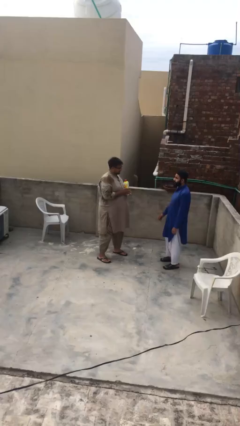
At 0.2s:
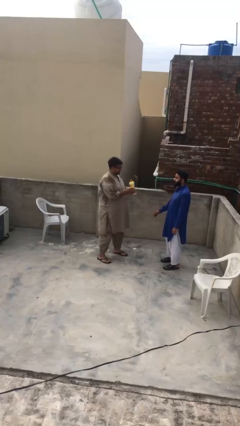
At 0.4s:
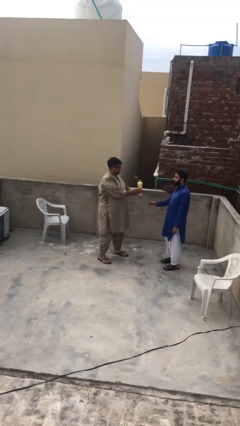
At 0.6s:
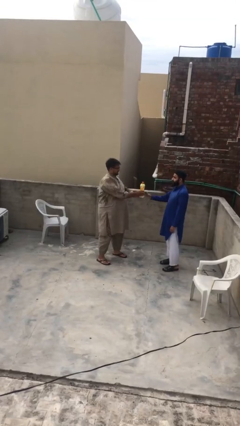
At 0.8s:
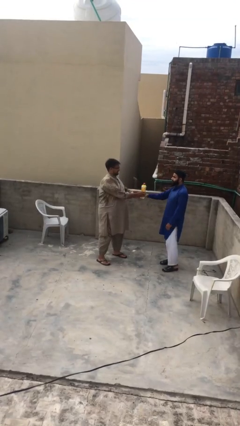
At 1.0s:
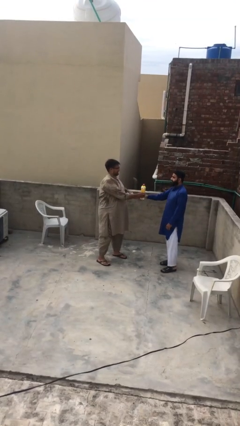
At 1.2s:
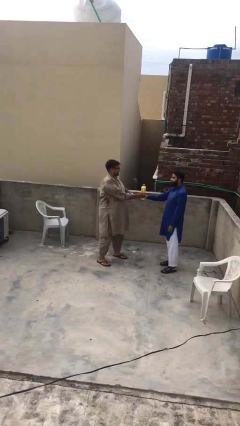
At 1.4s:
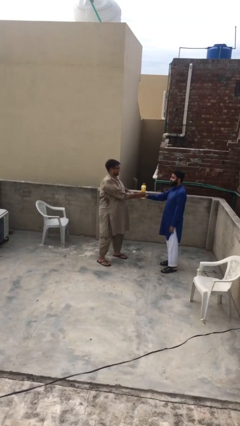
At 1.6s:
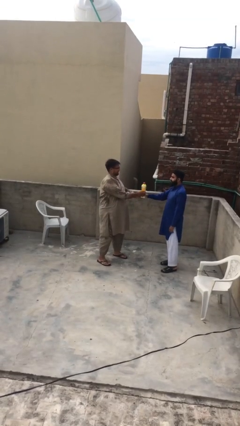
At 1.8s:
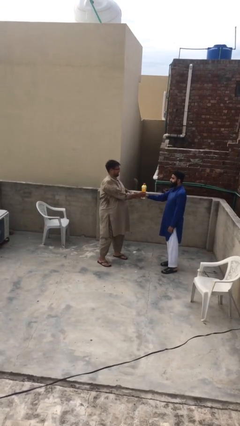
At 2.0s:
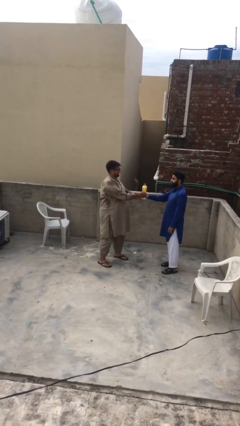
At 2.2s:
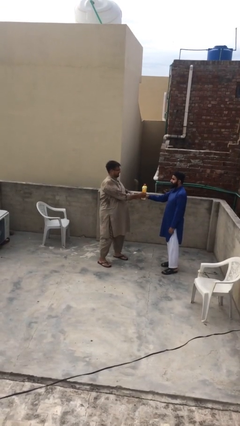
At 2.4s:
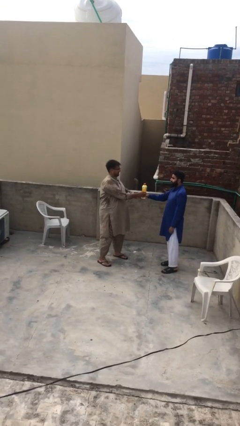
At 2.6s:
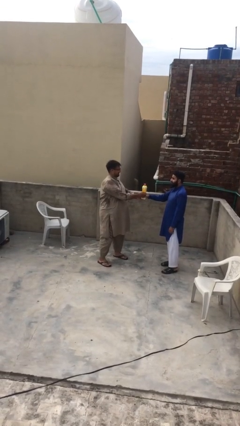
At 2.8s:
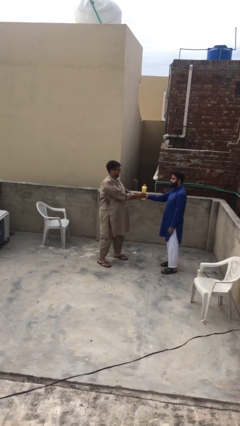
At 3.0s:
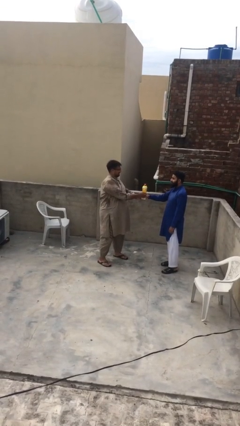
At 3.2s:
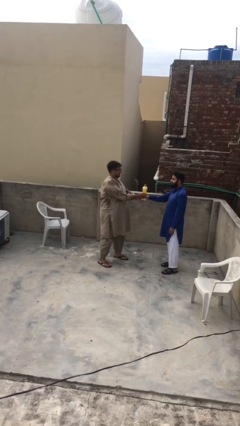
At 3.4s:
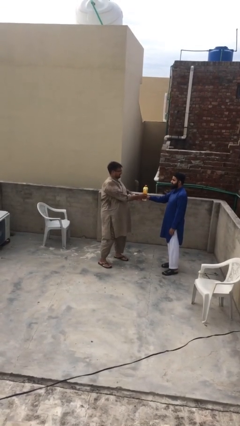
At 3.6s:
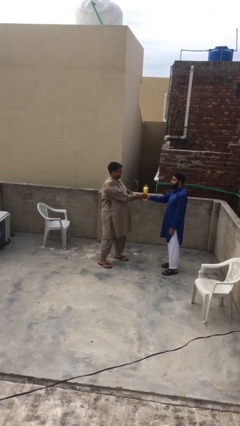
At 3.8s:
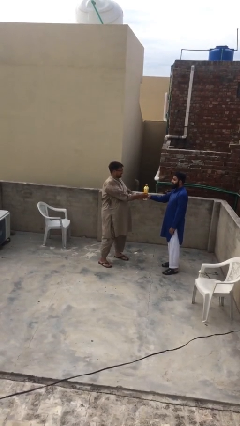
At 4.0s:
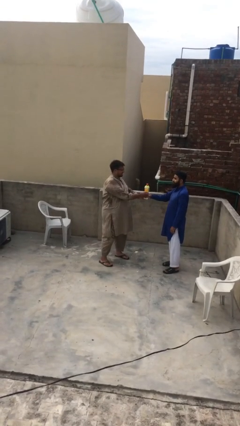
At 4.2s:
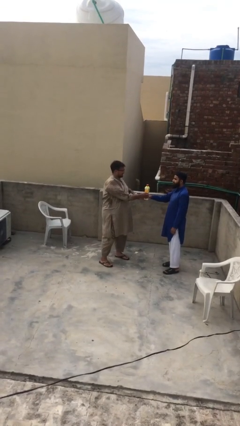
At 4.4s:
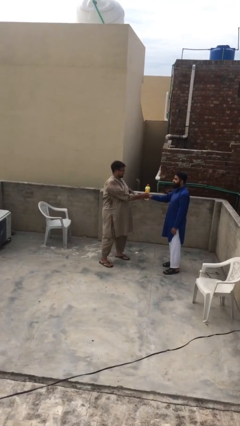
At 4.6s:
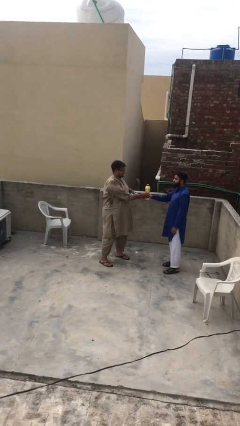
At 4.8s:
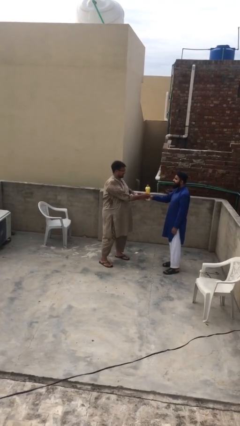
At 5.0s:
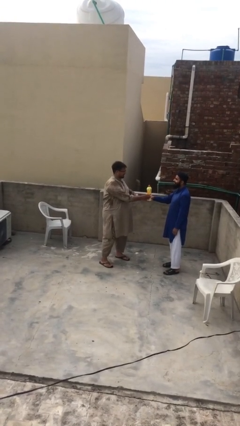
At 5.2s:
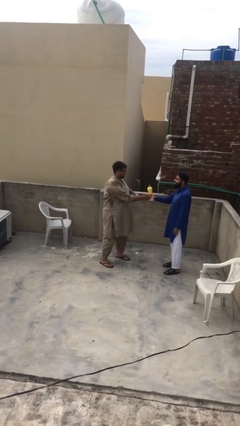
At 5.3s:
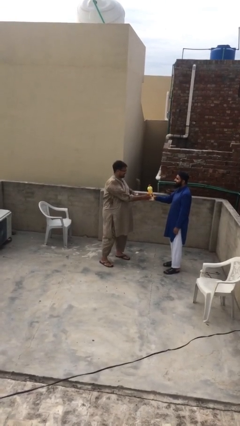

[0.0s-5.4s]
person transfers object to person

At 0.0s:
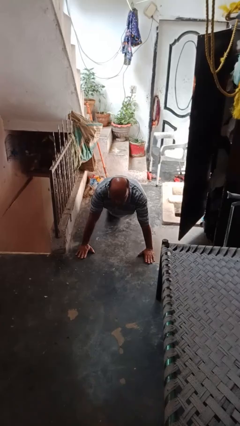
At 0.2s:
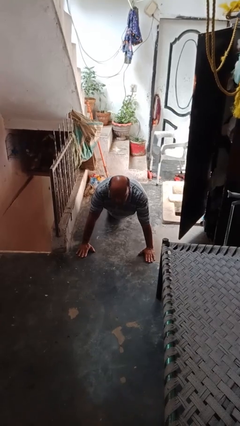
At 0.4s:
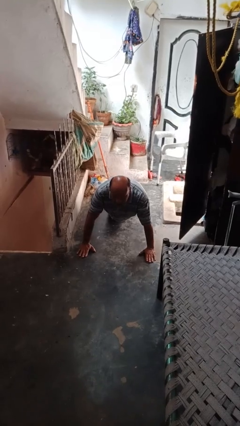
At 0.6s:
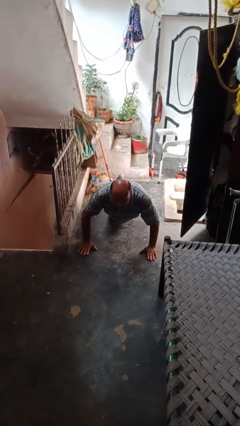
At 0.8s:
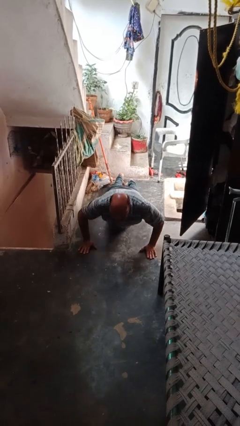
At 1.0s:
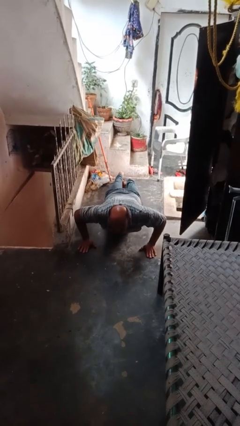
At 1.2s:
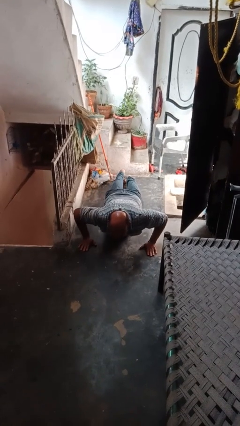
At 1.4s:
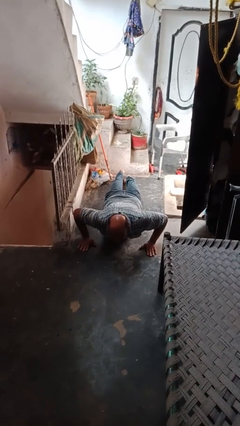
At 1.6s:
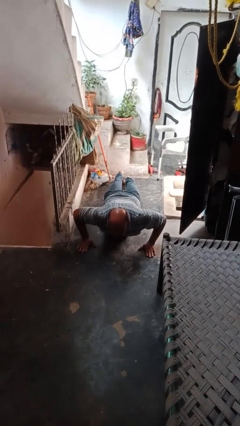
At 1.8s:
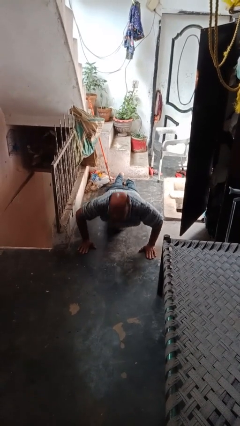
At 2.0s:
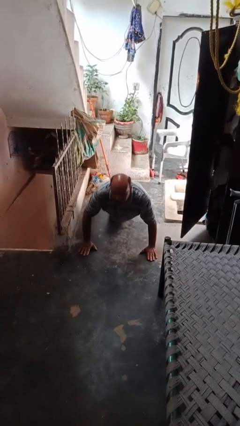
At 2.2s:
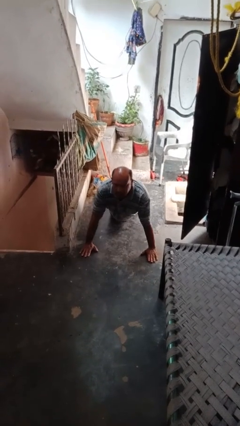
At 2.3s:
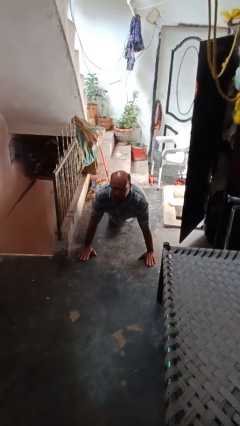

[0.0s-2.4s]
person exercises with pushup

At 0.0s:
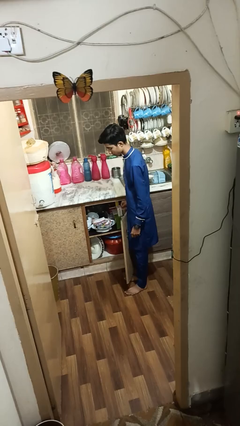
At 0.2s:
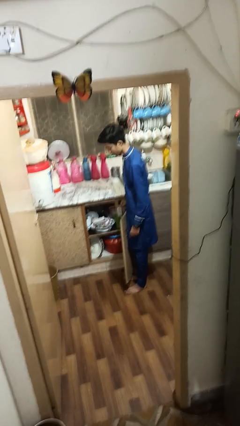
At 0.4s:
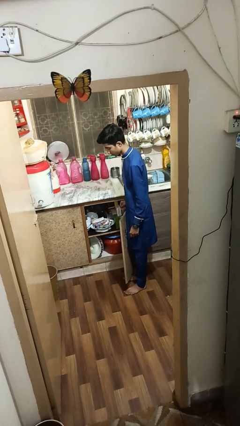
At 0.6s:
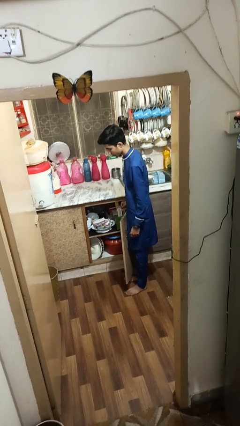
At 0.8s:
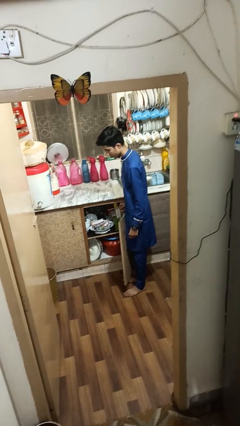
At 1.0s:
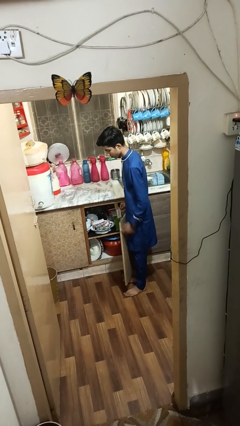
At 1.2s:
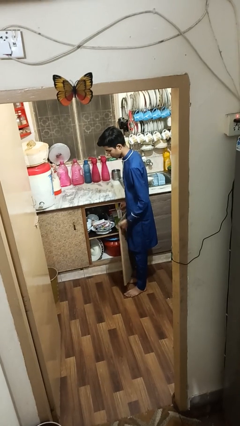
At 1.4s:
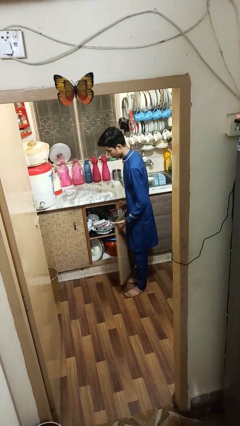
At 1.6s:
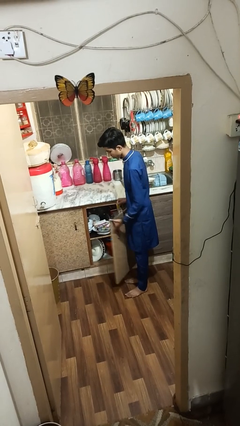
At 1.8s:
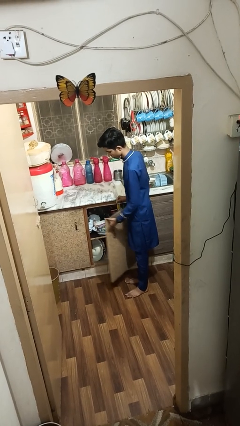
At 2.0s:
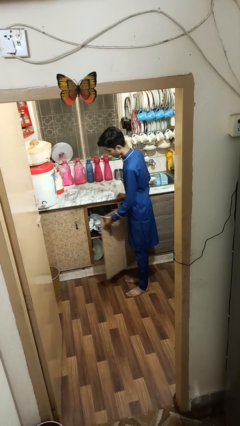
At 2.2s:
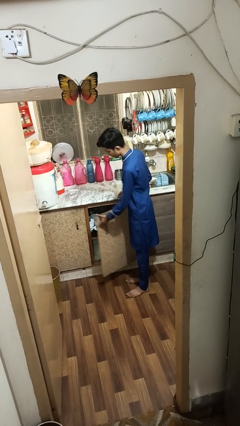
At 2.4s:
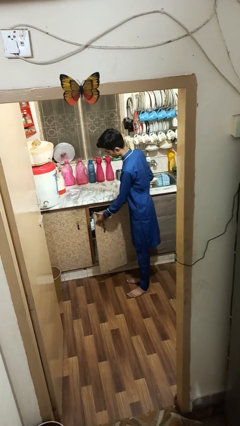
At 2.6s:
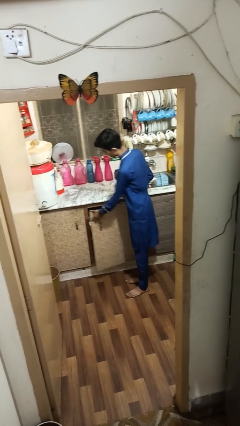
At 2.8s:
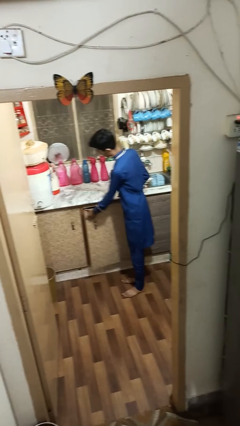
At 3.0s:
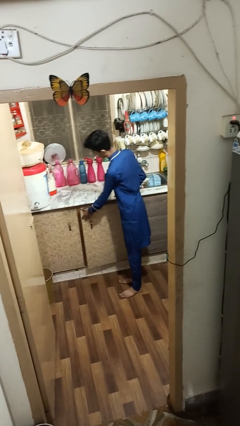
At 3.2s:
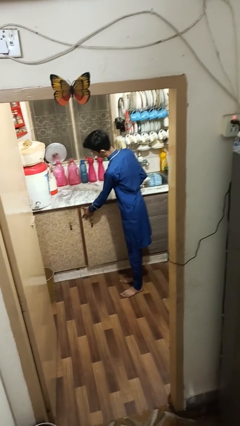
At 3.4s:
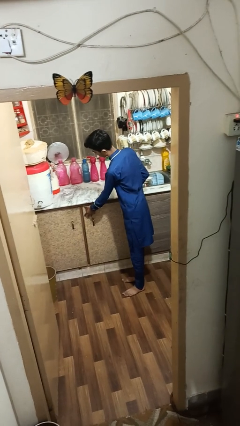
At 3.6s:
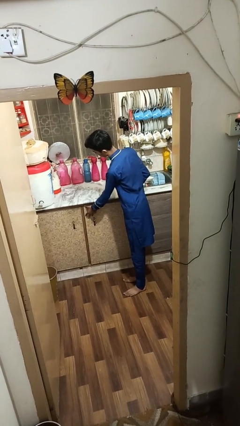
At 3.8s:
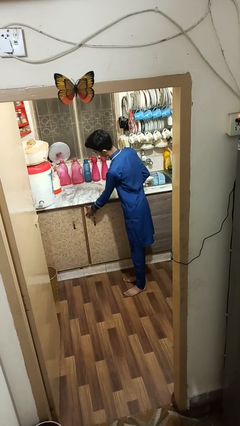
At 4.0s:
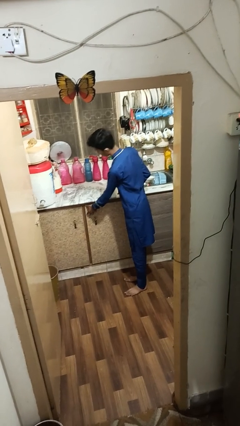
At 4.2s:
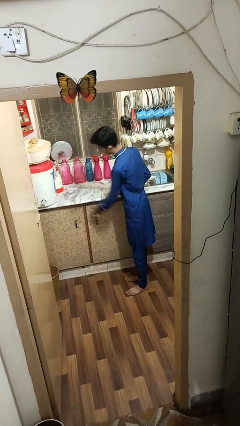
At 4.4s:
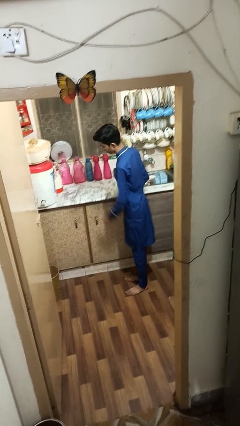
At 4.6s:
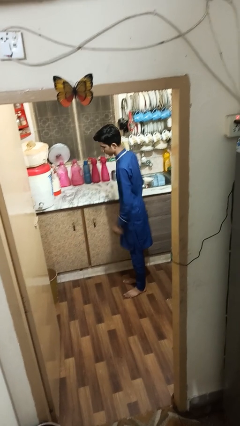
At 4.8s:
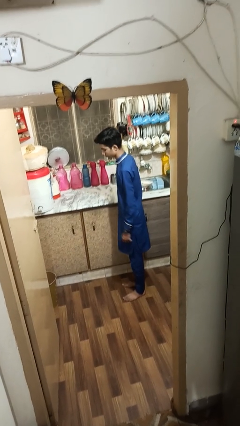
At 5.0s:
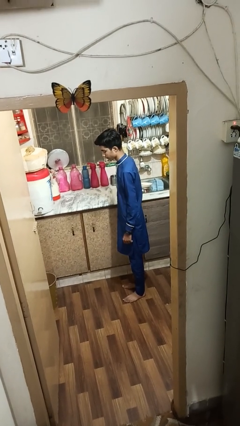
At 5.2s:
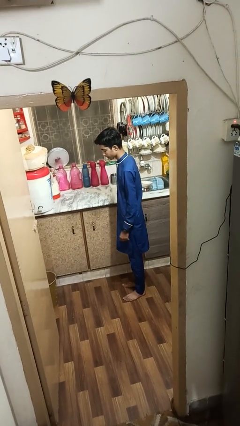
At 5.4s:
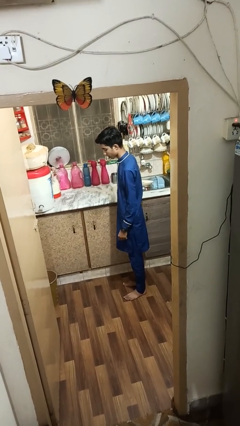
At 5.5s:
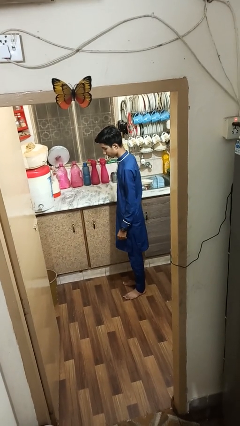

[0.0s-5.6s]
person closes cabinet

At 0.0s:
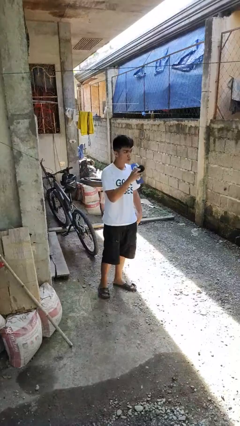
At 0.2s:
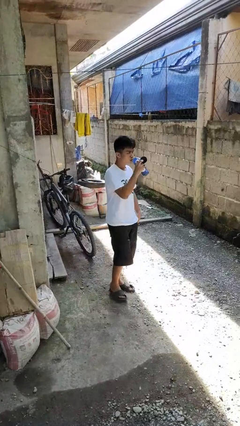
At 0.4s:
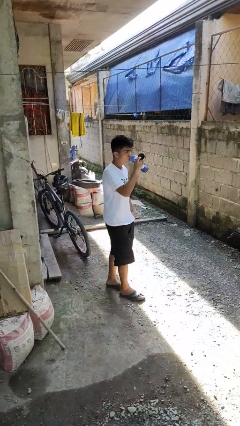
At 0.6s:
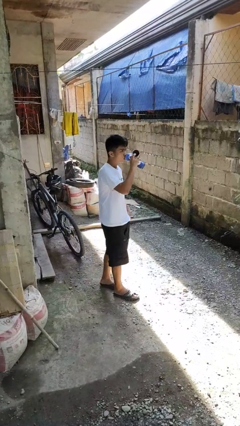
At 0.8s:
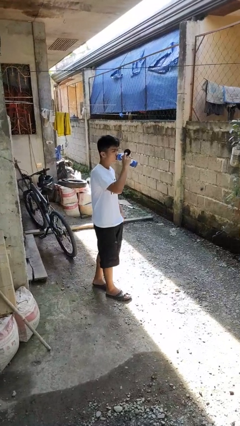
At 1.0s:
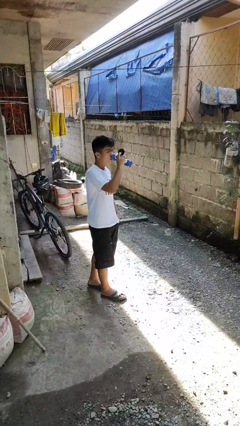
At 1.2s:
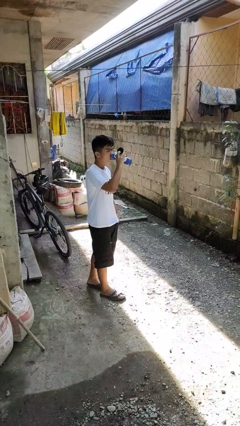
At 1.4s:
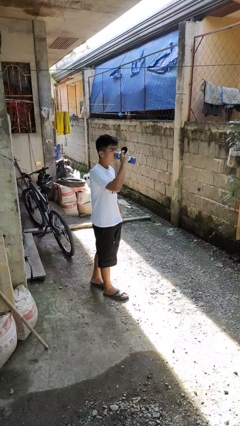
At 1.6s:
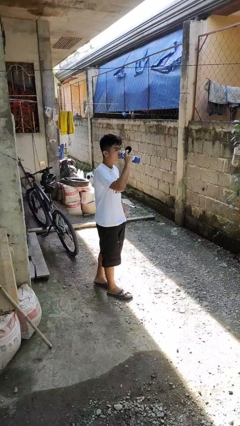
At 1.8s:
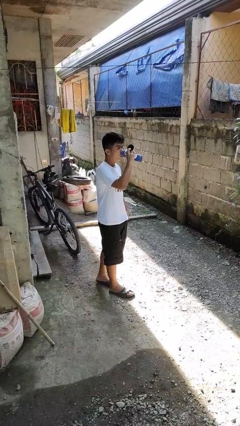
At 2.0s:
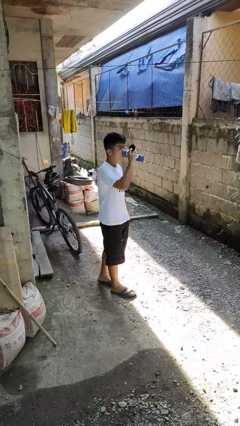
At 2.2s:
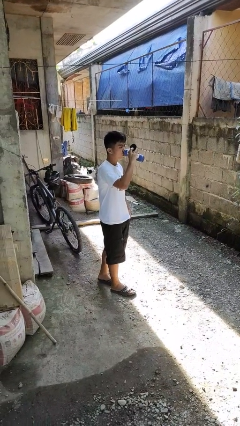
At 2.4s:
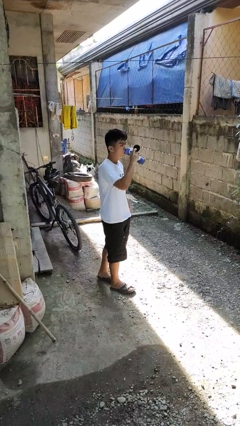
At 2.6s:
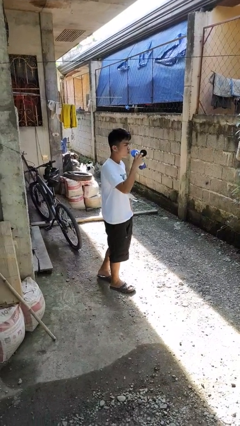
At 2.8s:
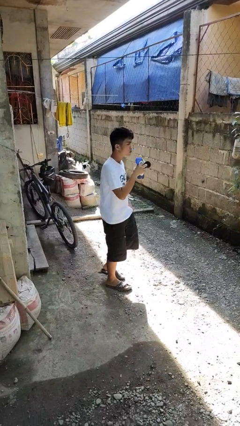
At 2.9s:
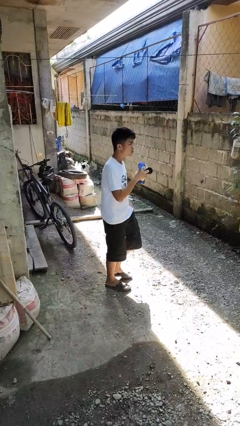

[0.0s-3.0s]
person drinks from bottle

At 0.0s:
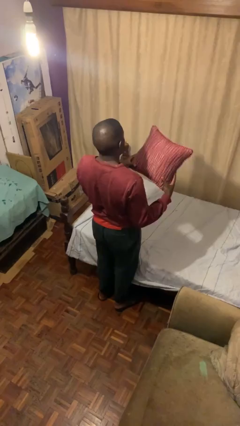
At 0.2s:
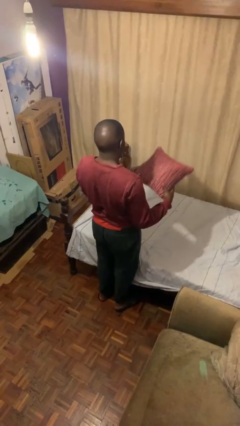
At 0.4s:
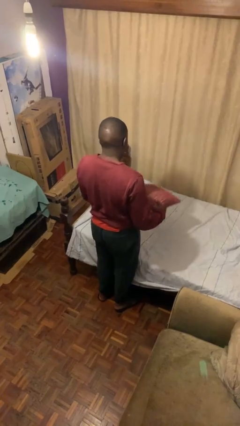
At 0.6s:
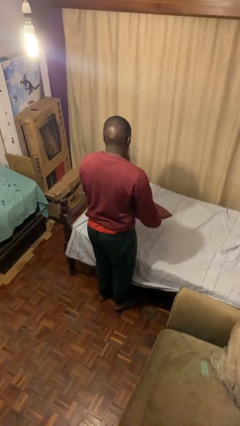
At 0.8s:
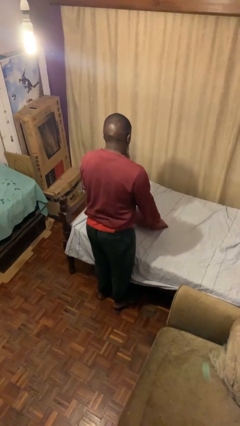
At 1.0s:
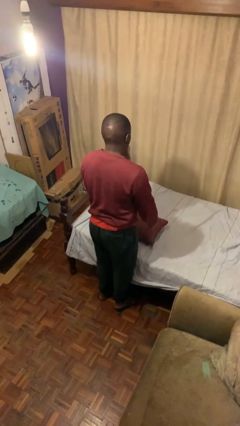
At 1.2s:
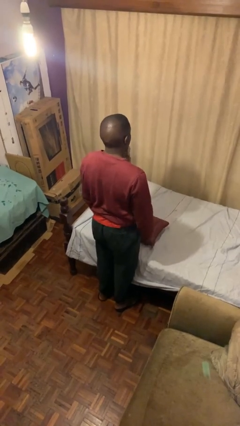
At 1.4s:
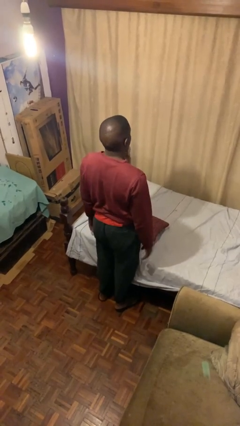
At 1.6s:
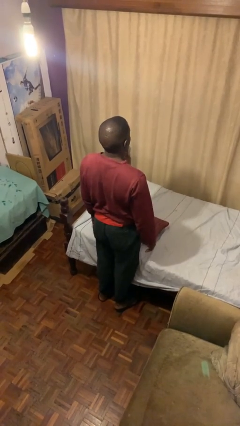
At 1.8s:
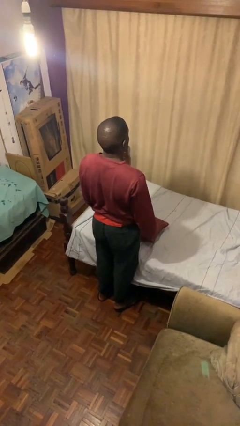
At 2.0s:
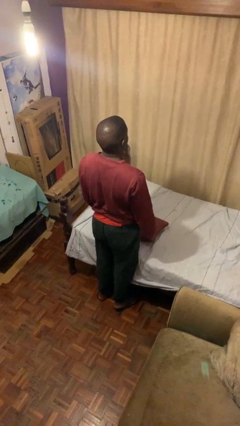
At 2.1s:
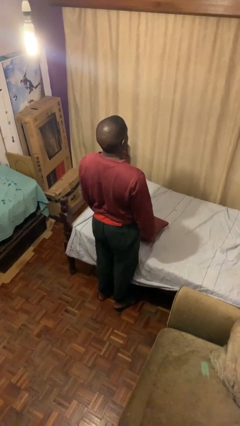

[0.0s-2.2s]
person puts down object on bed
